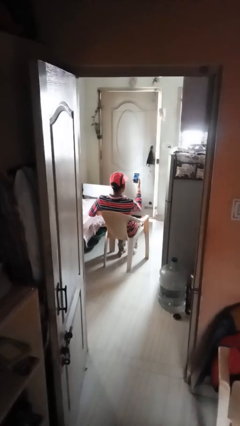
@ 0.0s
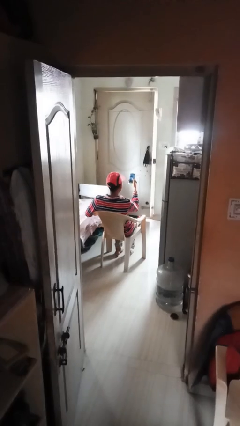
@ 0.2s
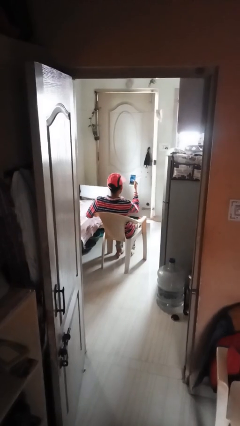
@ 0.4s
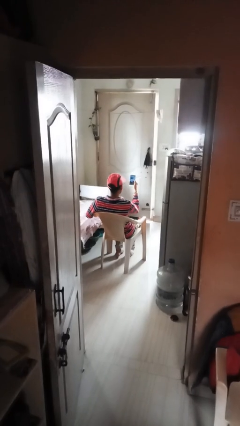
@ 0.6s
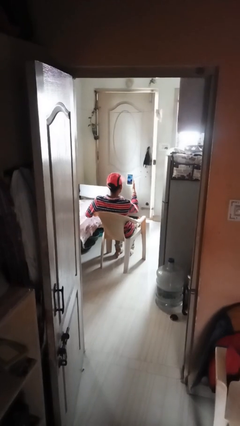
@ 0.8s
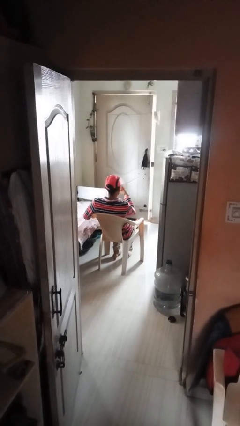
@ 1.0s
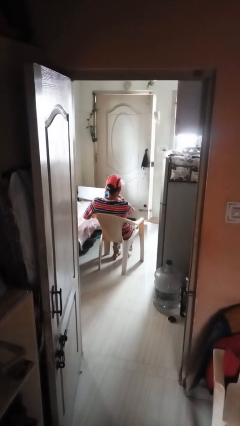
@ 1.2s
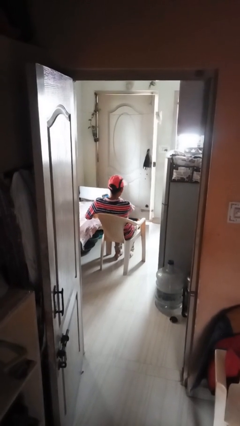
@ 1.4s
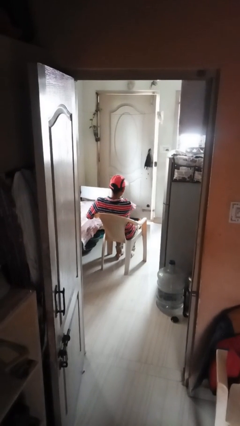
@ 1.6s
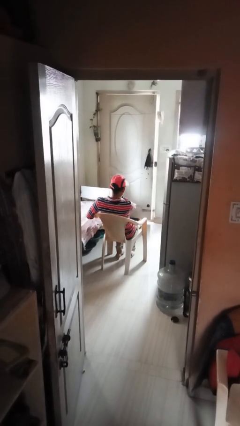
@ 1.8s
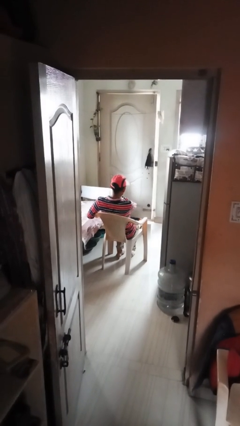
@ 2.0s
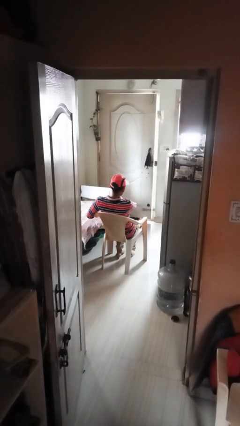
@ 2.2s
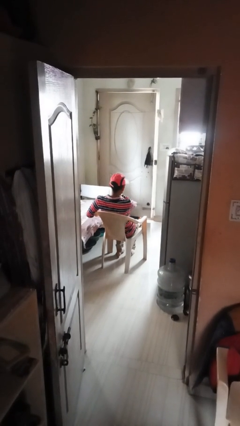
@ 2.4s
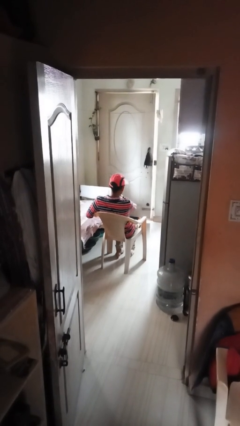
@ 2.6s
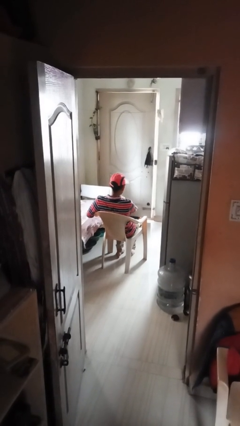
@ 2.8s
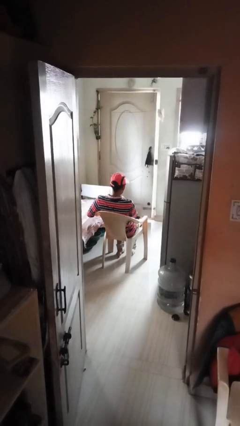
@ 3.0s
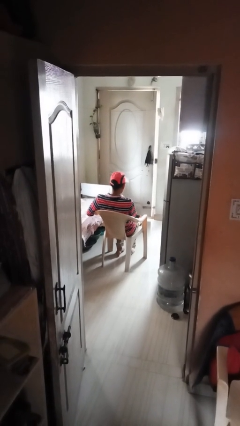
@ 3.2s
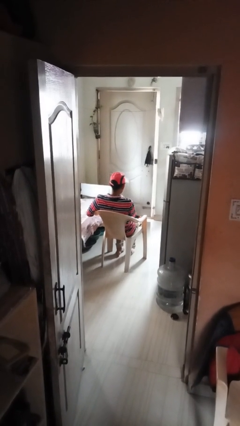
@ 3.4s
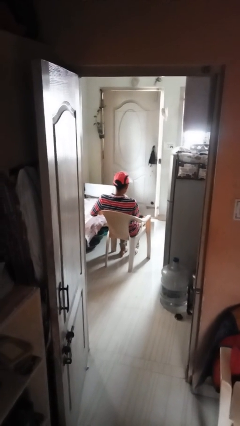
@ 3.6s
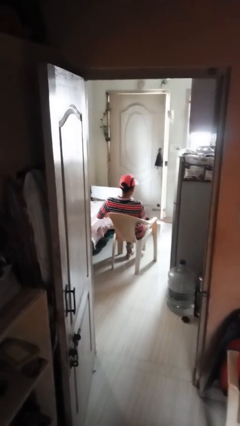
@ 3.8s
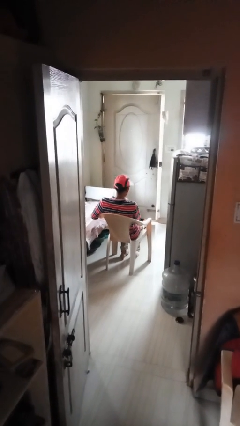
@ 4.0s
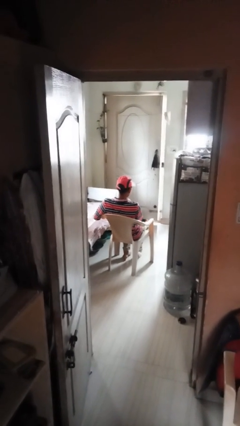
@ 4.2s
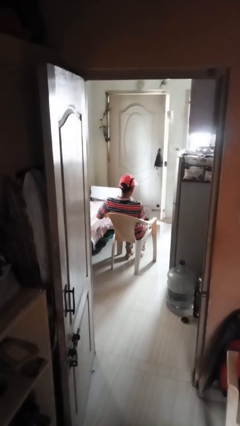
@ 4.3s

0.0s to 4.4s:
person puts phone into pocket

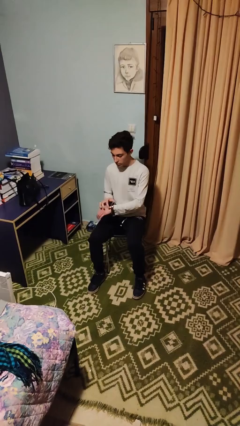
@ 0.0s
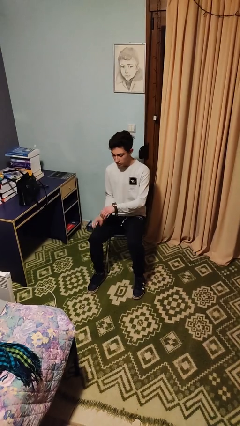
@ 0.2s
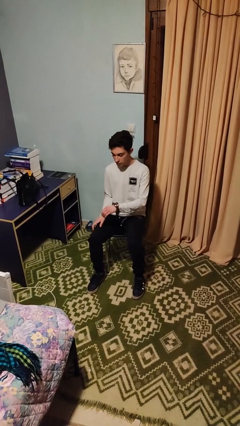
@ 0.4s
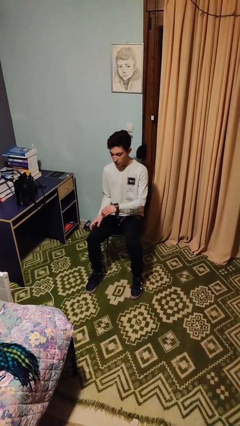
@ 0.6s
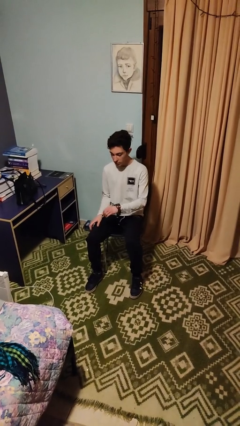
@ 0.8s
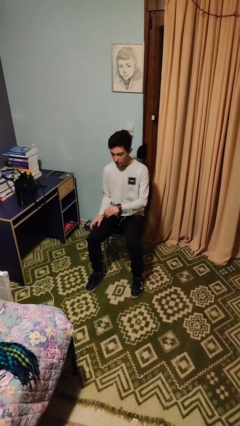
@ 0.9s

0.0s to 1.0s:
person puts on wristwatch

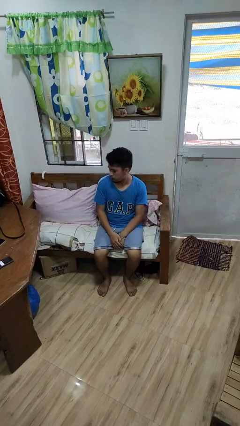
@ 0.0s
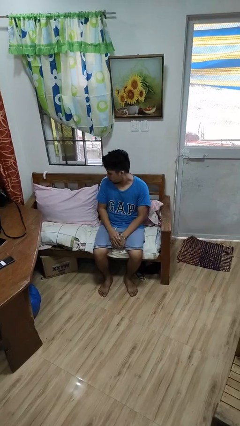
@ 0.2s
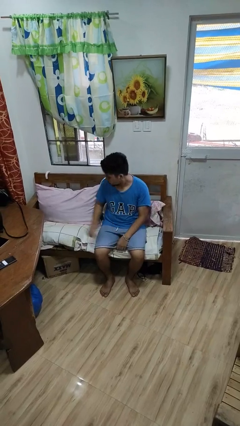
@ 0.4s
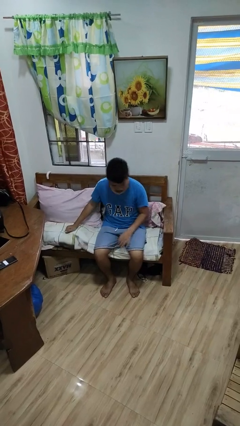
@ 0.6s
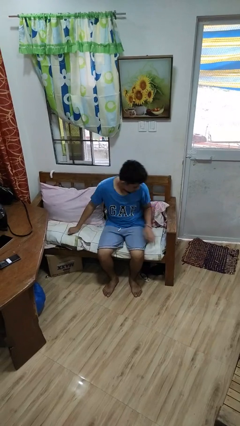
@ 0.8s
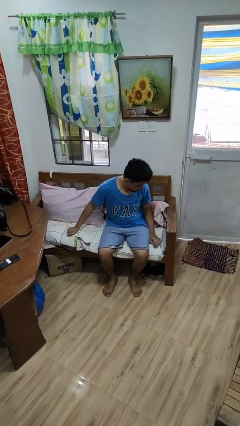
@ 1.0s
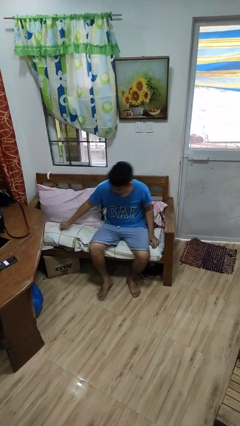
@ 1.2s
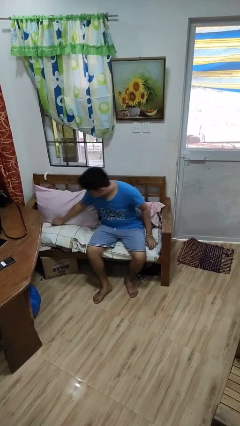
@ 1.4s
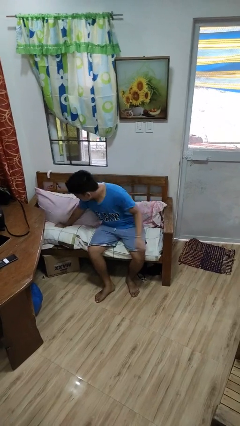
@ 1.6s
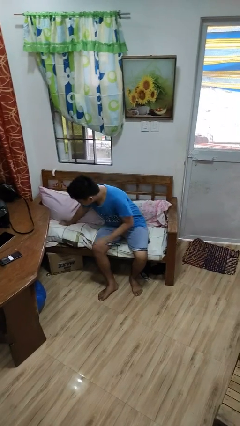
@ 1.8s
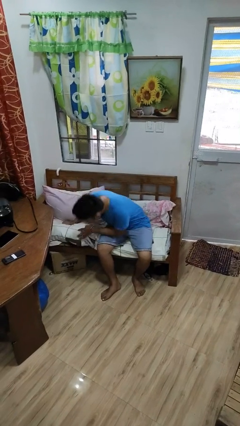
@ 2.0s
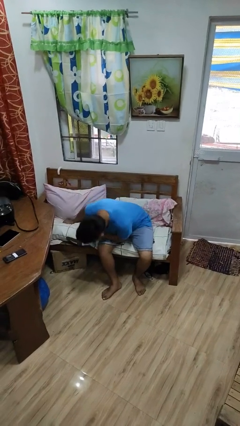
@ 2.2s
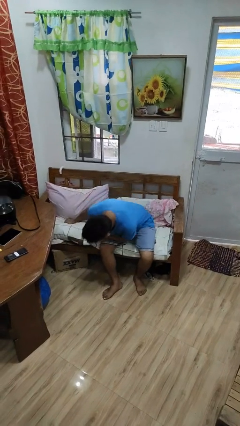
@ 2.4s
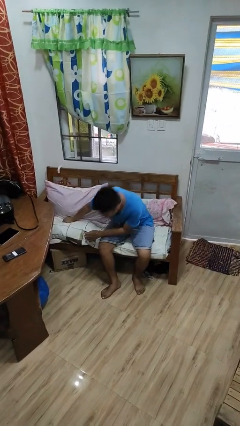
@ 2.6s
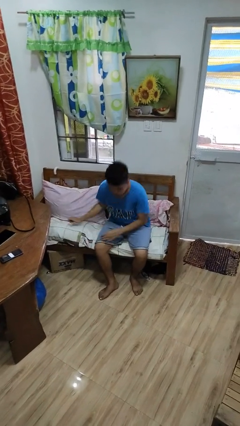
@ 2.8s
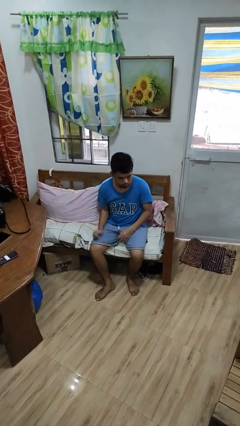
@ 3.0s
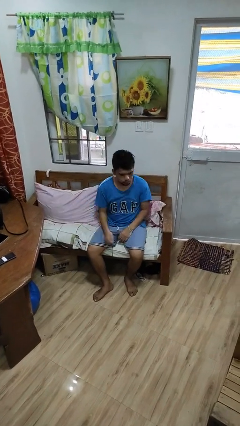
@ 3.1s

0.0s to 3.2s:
person searches in couch

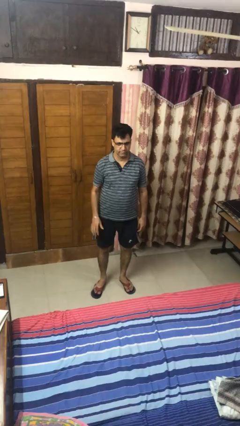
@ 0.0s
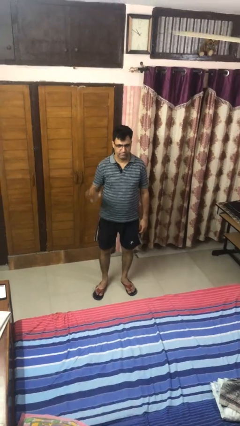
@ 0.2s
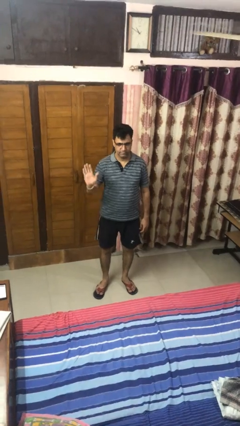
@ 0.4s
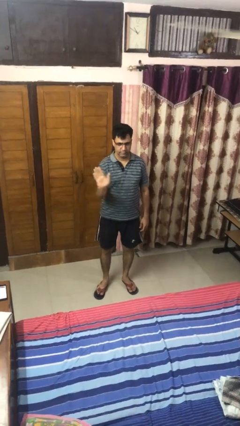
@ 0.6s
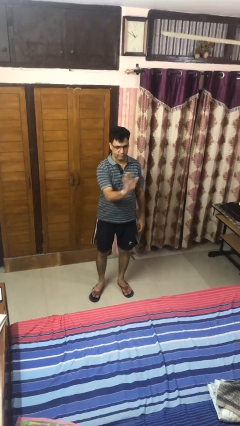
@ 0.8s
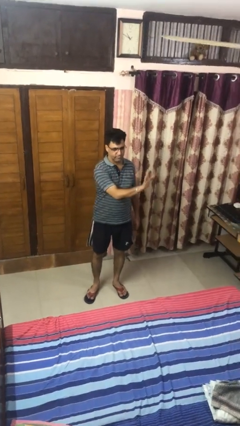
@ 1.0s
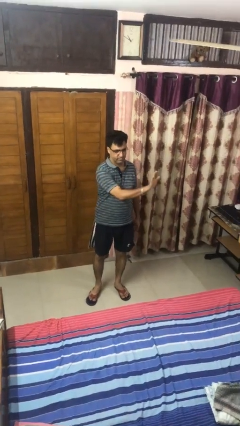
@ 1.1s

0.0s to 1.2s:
person gestures swipe left

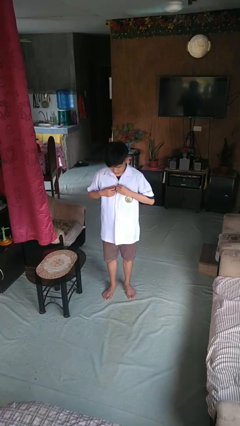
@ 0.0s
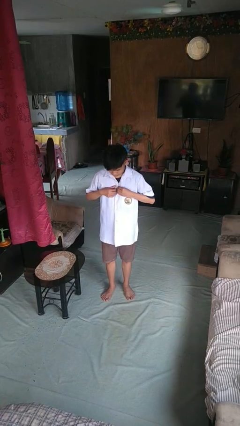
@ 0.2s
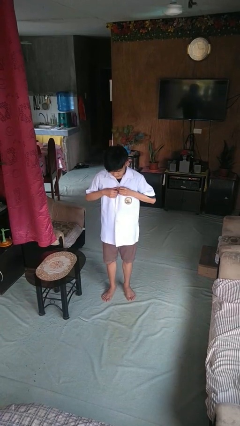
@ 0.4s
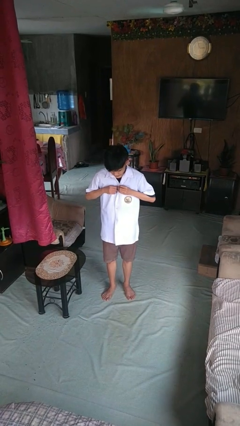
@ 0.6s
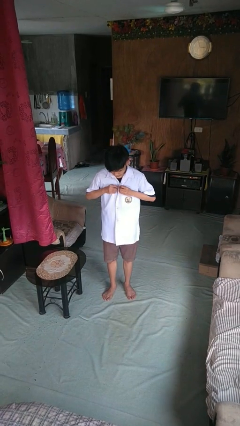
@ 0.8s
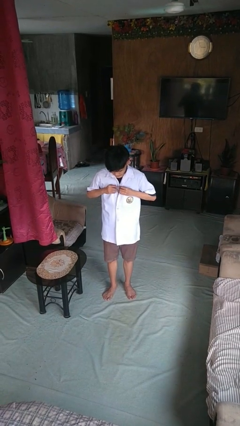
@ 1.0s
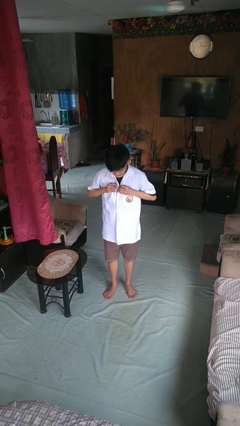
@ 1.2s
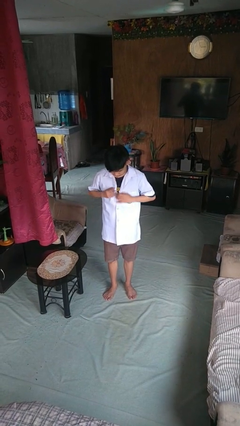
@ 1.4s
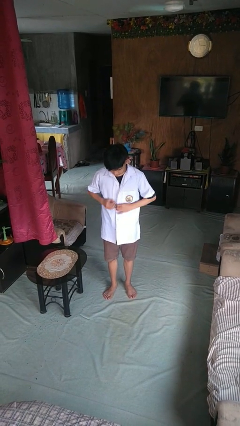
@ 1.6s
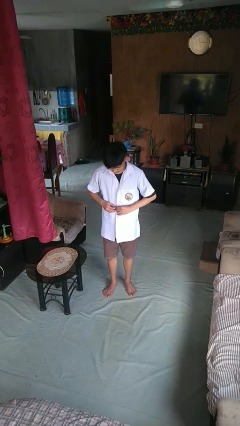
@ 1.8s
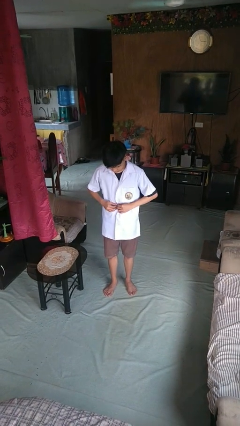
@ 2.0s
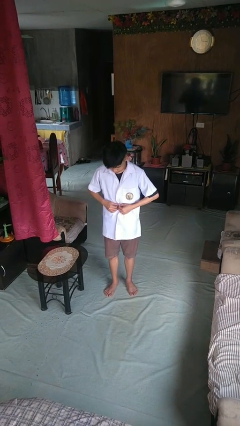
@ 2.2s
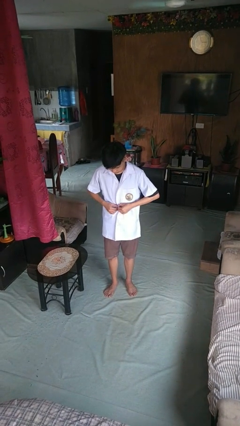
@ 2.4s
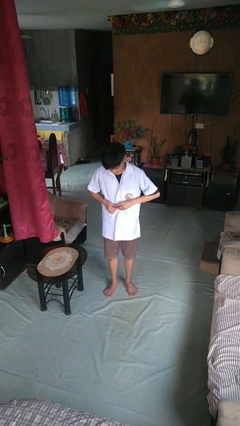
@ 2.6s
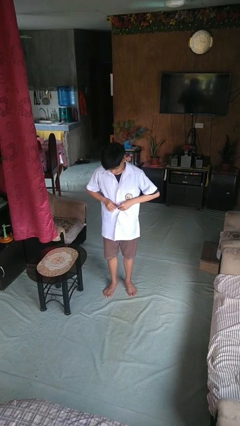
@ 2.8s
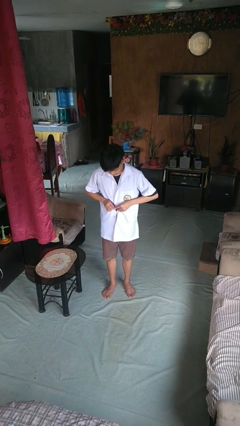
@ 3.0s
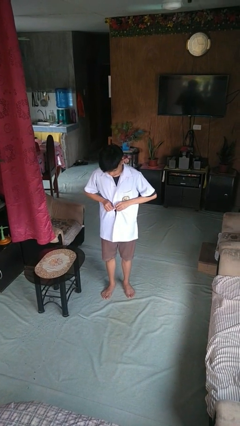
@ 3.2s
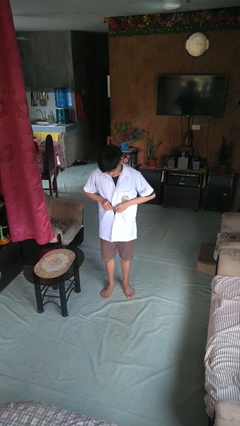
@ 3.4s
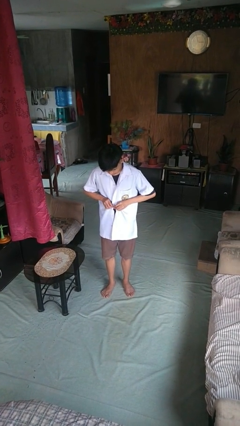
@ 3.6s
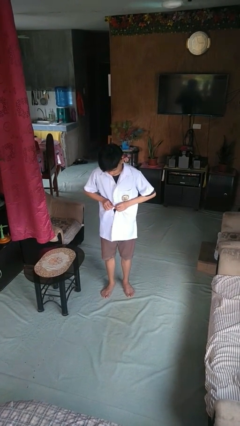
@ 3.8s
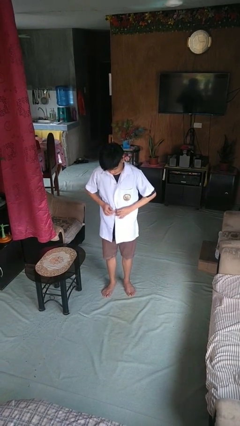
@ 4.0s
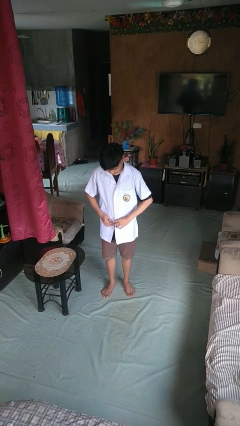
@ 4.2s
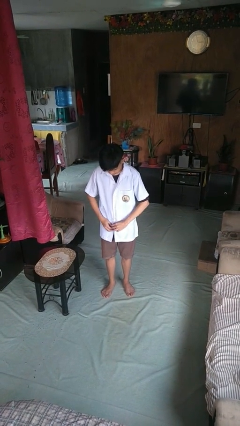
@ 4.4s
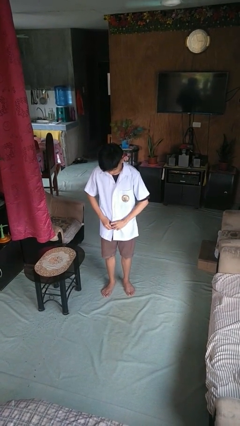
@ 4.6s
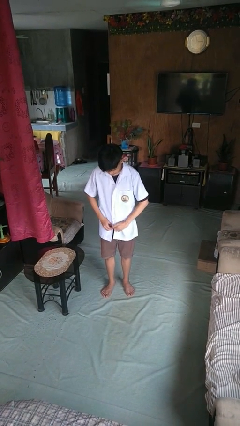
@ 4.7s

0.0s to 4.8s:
person unbuttons shirt

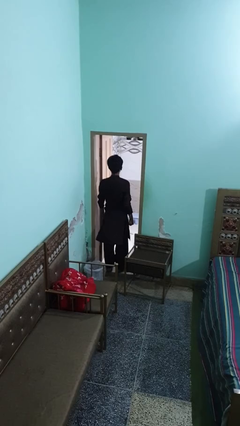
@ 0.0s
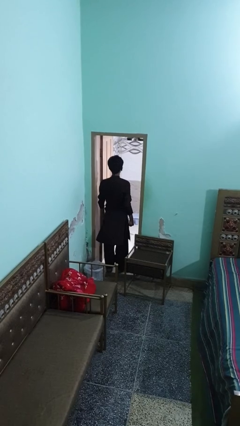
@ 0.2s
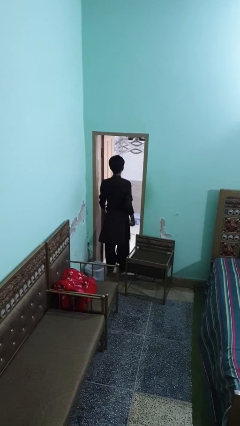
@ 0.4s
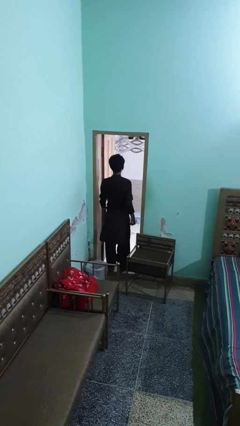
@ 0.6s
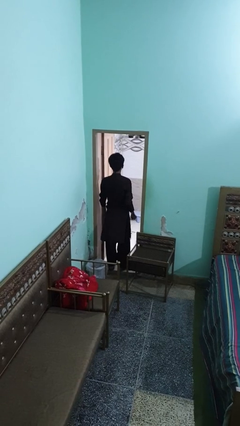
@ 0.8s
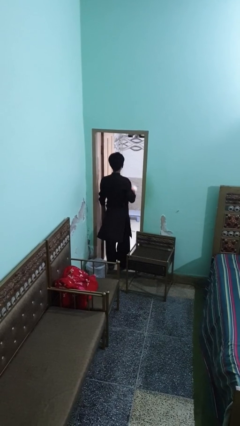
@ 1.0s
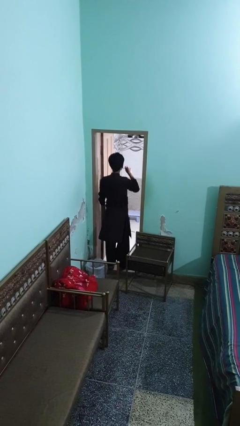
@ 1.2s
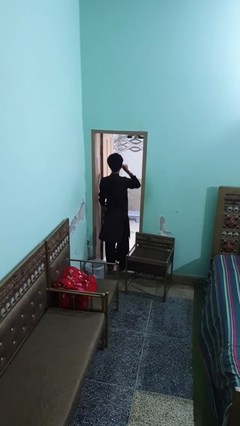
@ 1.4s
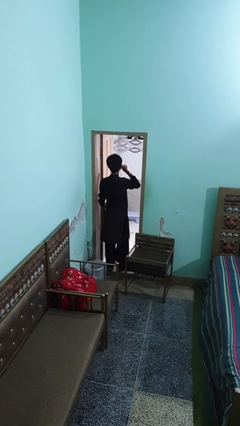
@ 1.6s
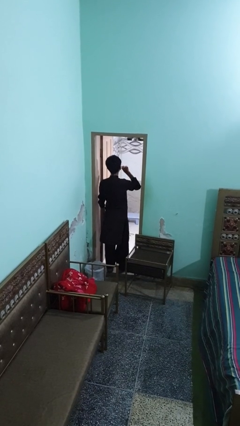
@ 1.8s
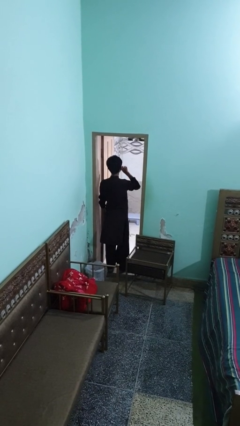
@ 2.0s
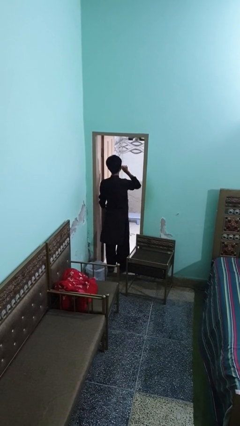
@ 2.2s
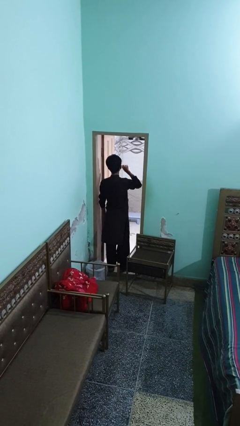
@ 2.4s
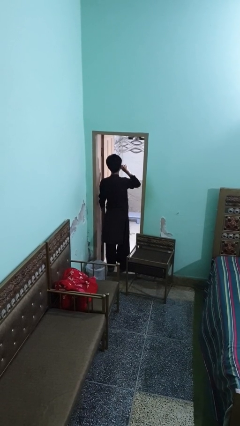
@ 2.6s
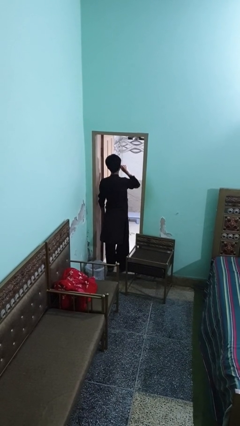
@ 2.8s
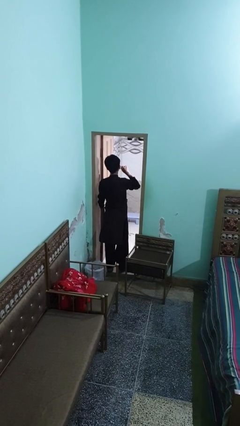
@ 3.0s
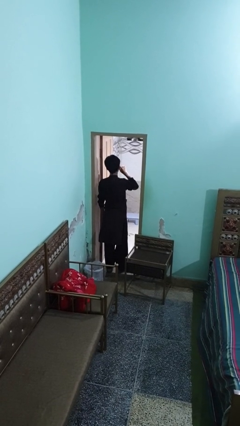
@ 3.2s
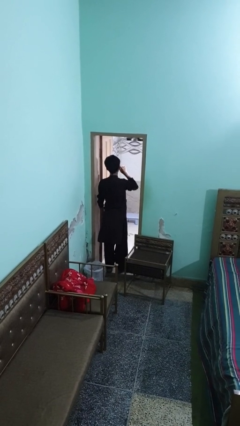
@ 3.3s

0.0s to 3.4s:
person brushes teeth
